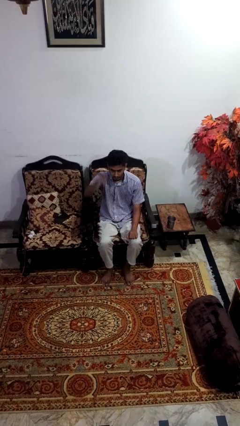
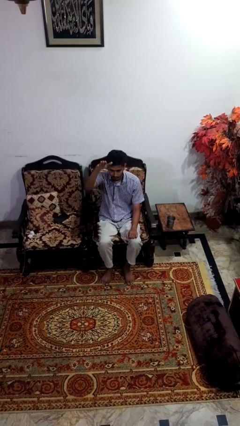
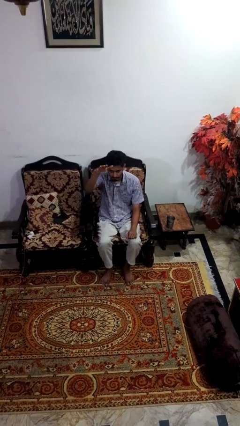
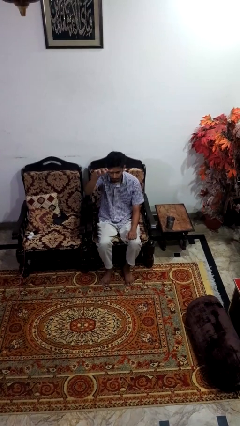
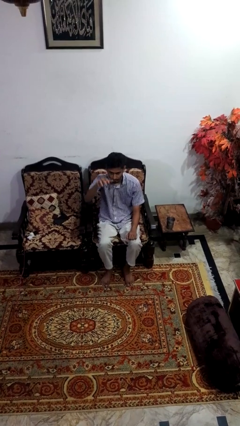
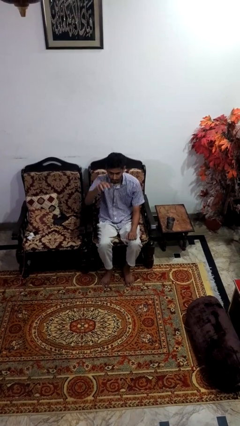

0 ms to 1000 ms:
person gestures swipe up

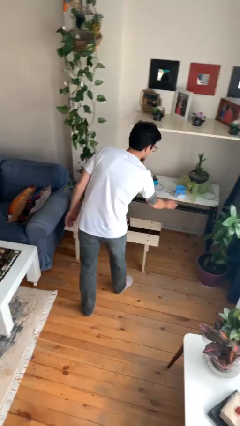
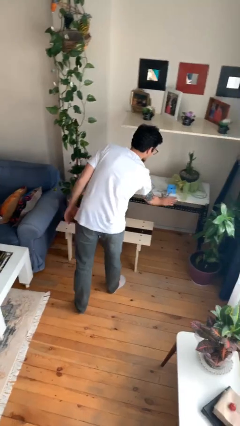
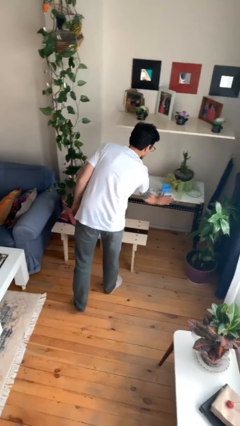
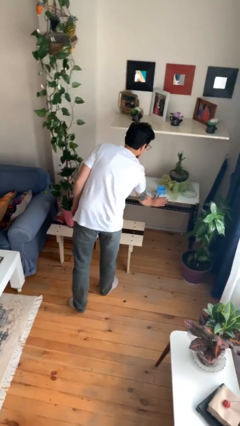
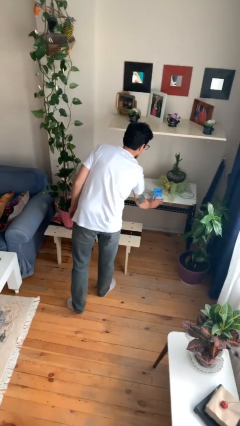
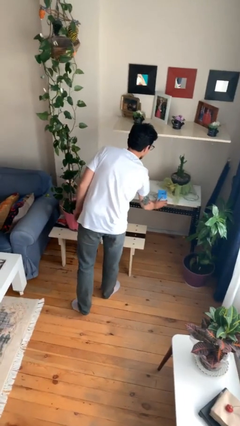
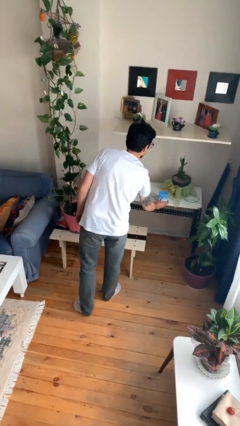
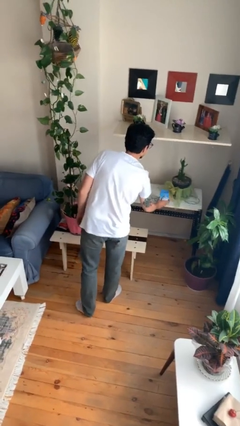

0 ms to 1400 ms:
person picks up object from table

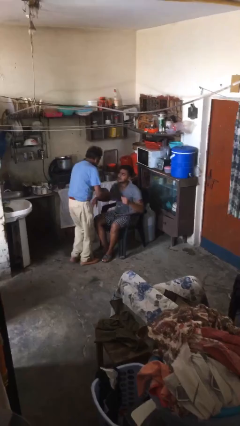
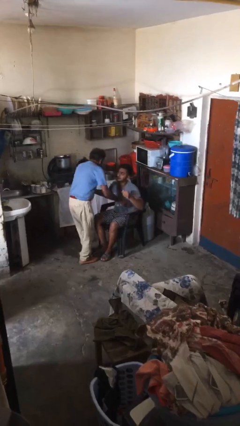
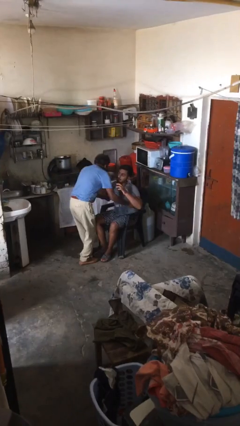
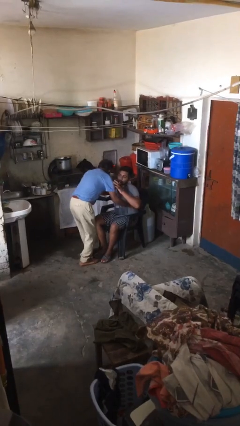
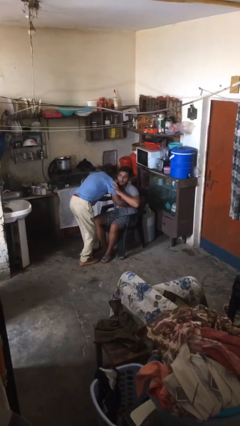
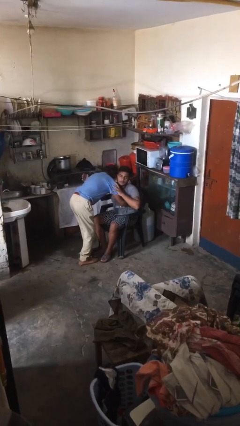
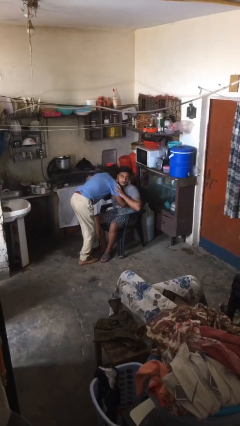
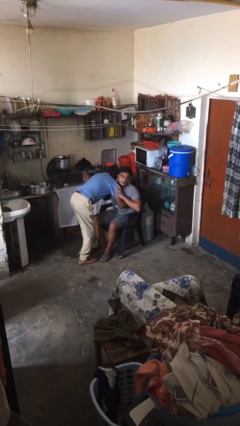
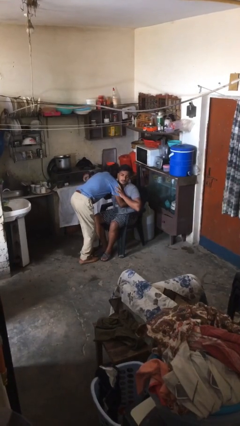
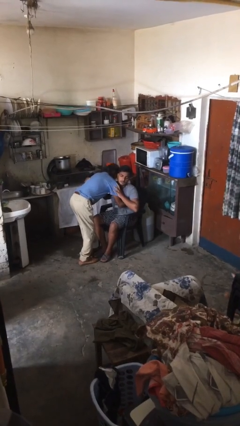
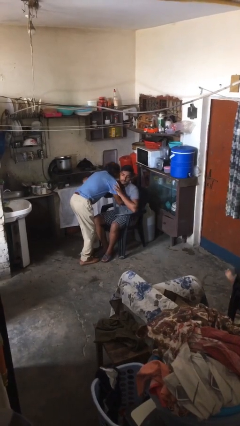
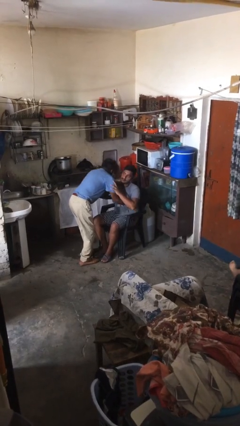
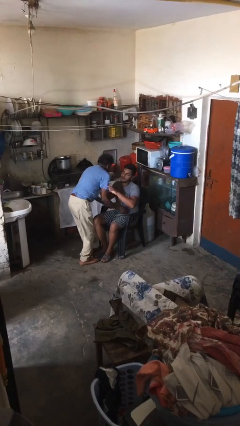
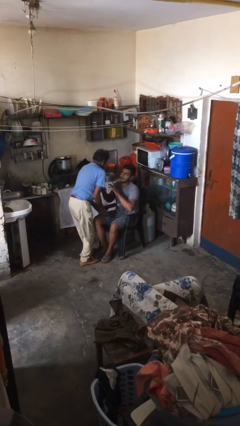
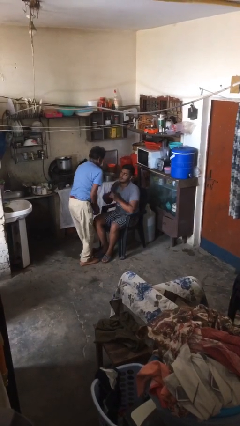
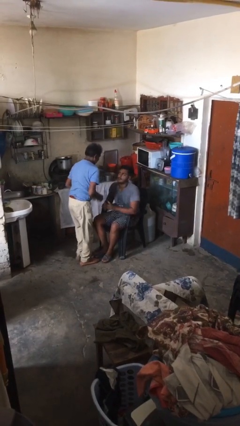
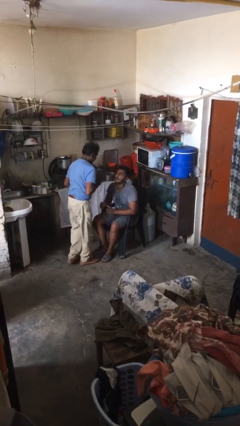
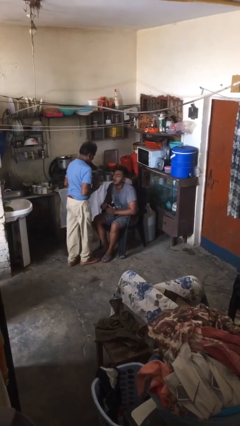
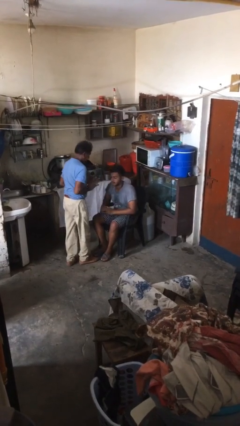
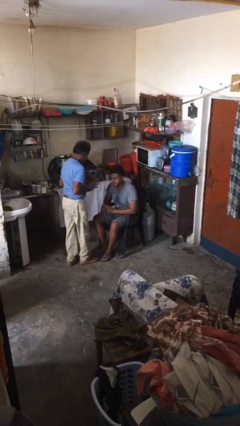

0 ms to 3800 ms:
person embraces person

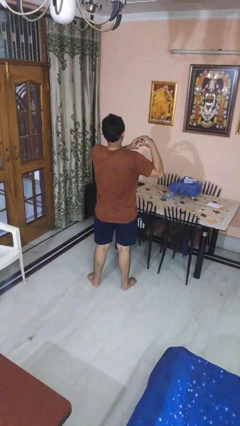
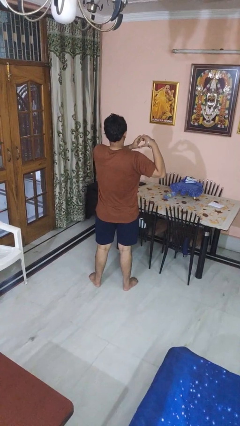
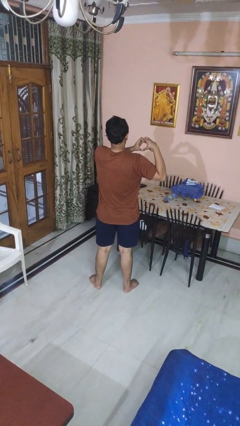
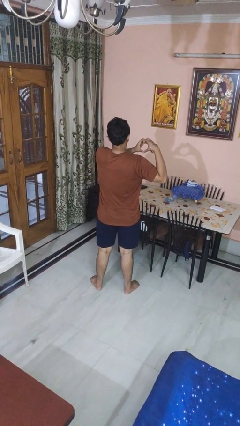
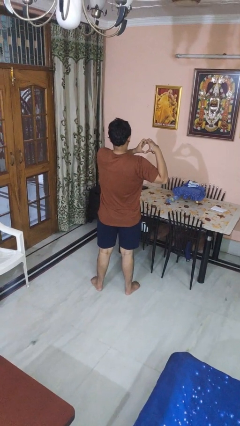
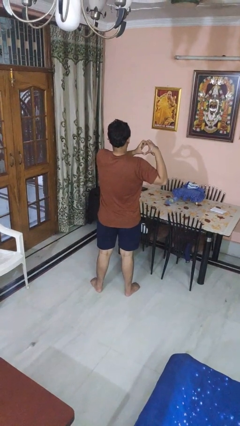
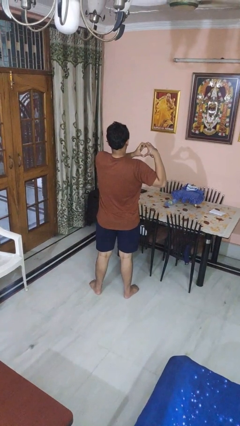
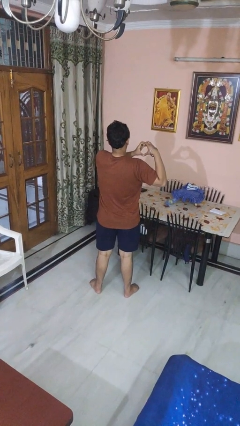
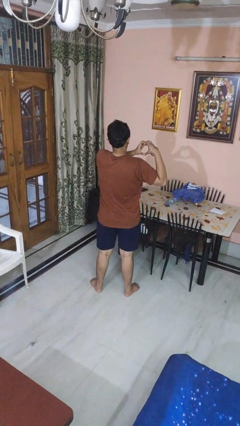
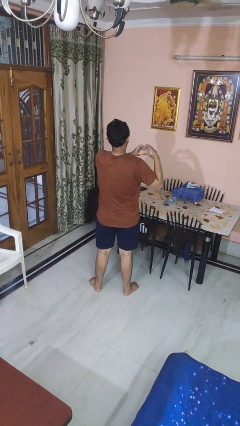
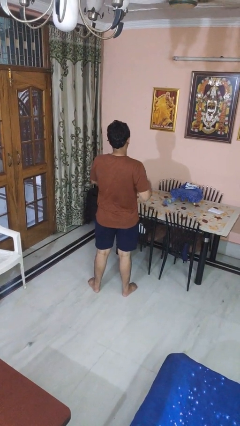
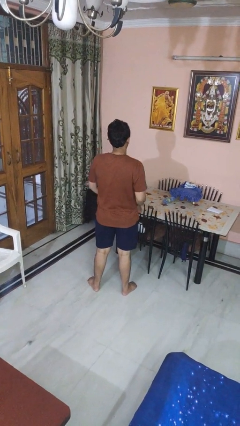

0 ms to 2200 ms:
person gestures heart

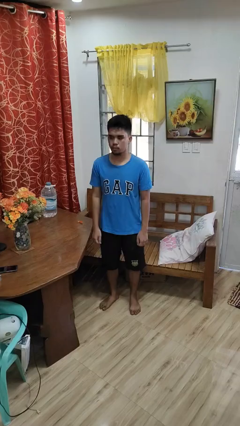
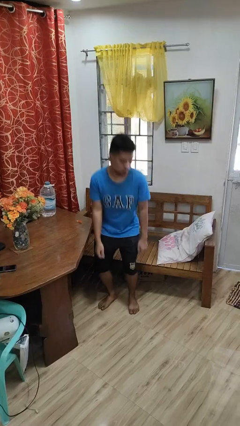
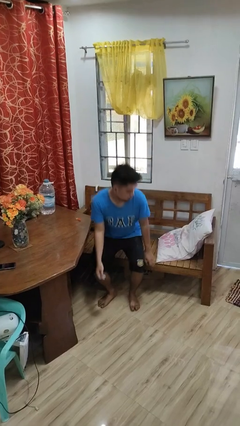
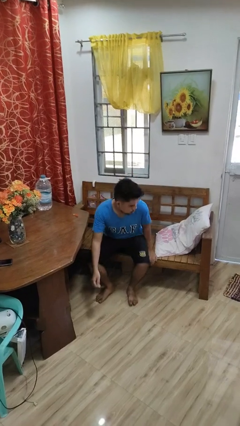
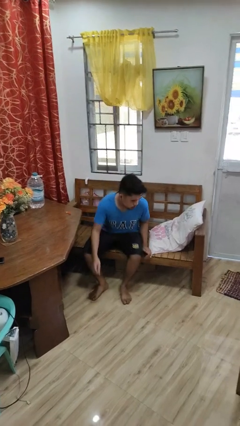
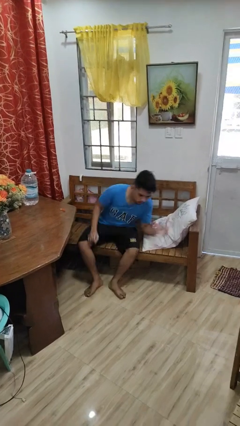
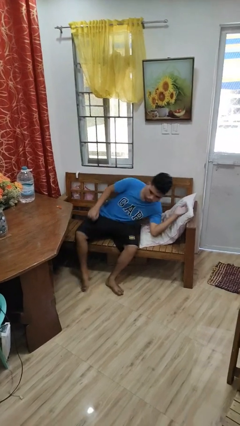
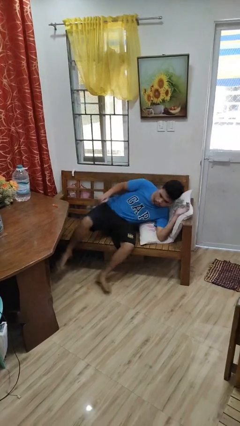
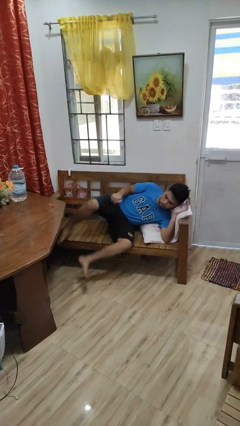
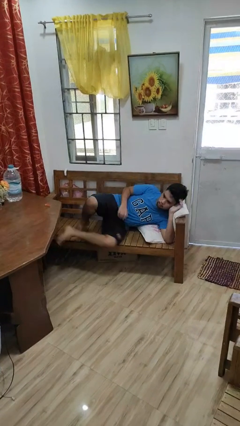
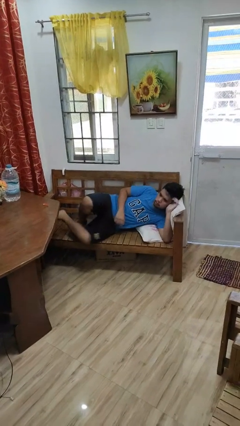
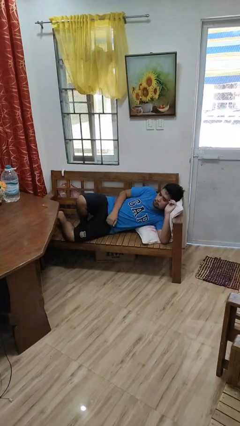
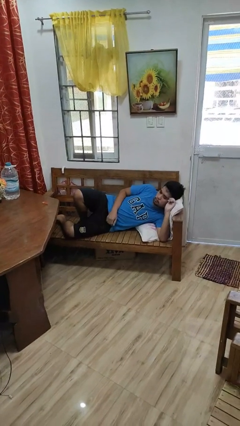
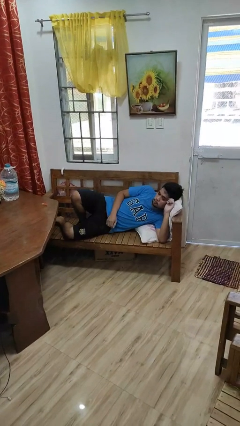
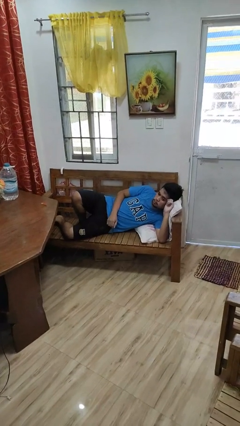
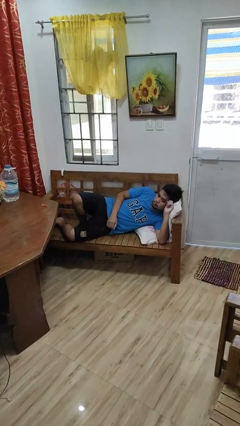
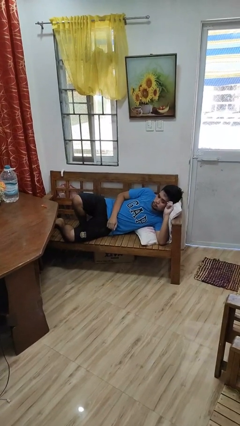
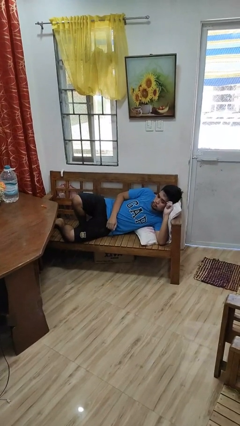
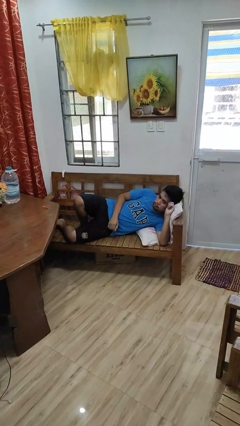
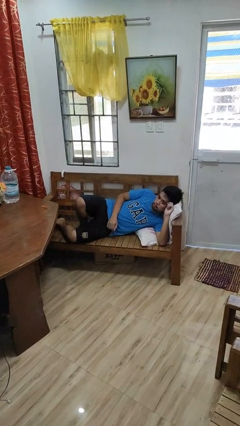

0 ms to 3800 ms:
person lies down on couch

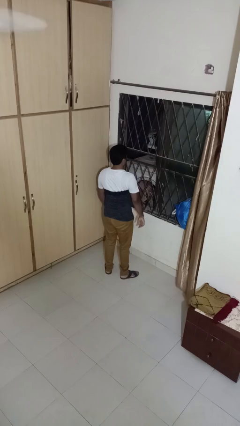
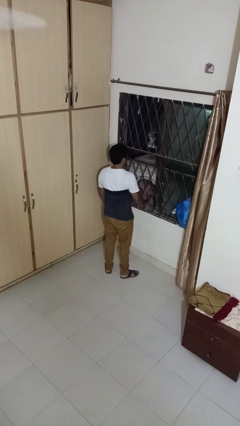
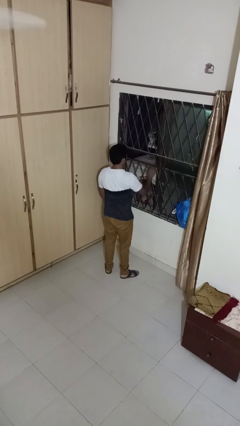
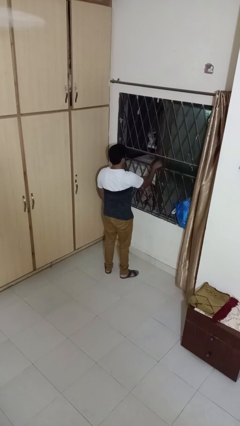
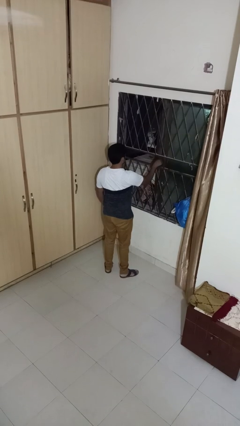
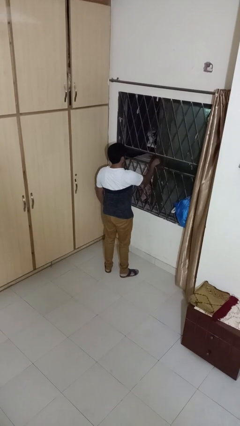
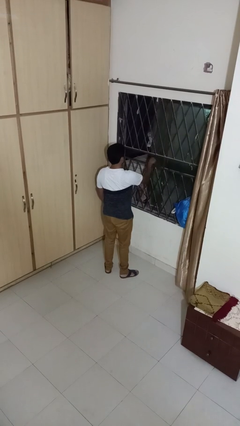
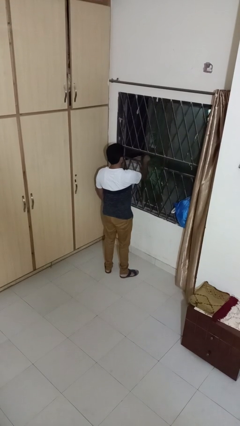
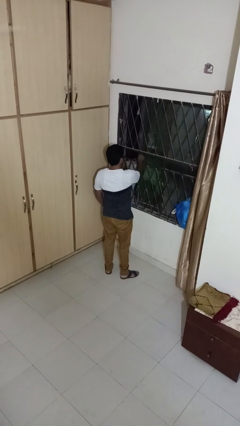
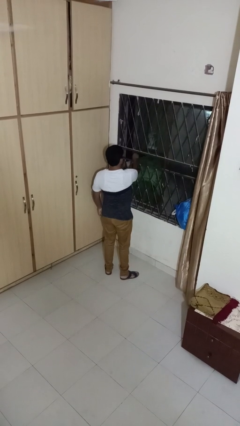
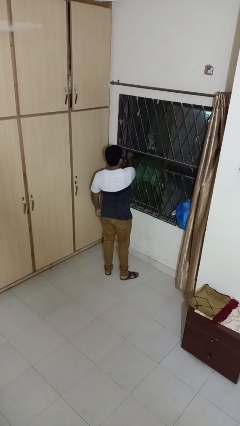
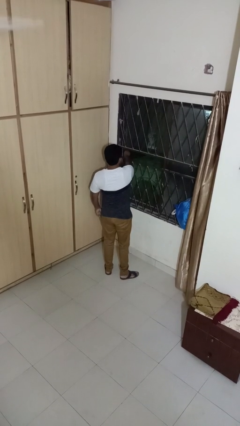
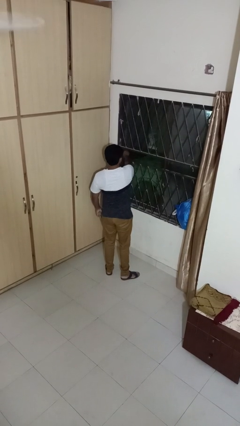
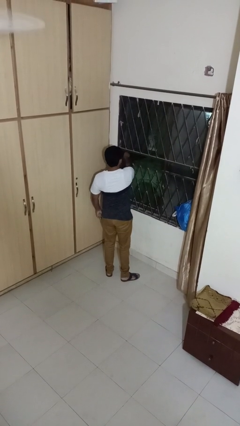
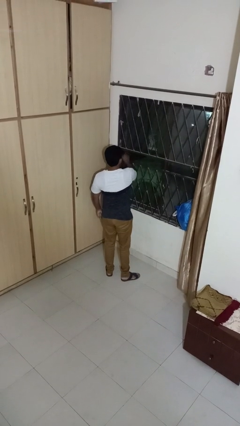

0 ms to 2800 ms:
person closes home window

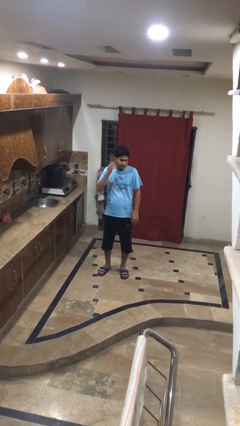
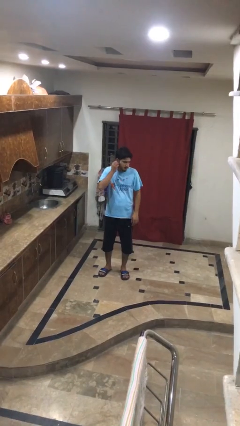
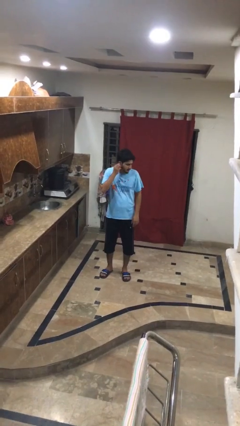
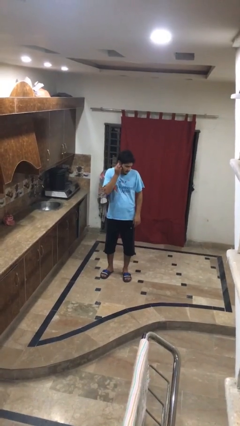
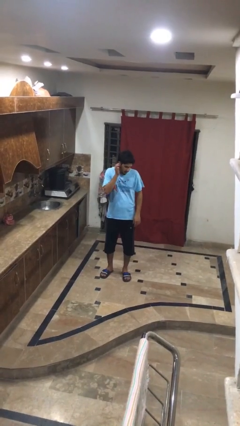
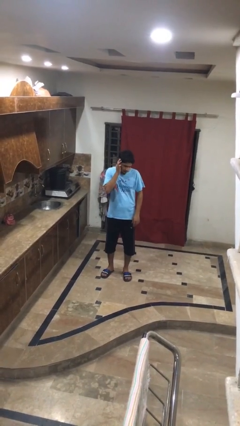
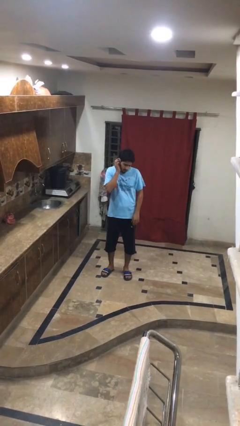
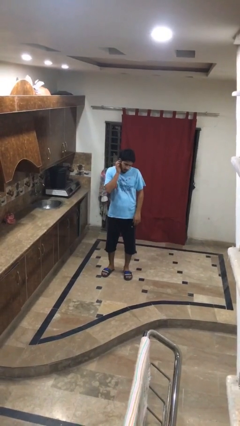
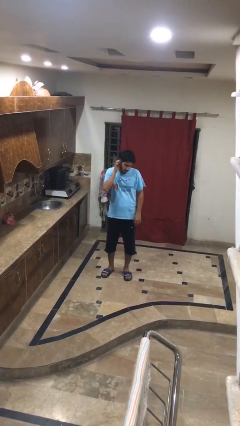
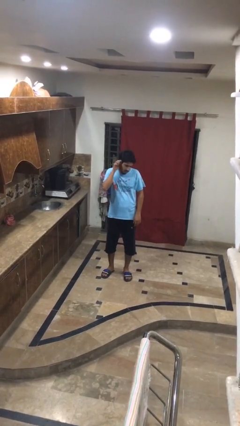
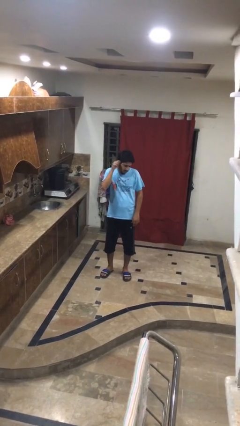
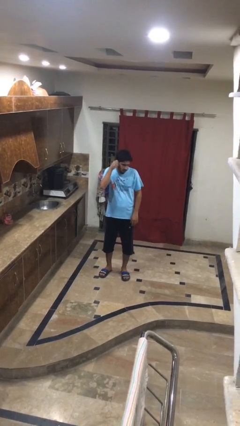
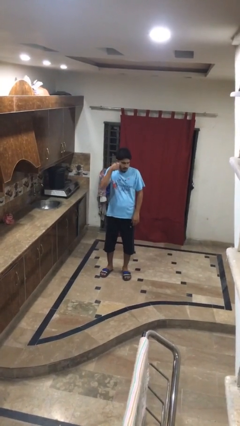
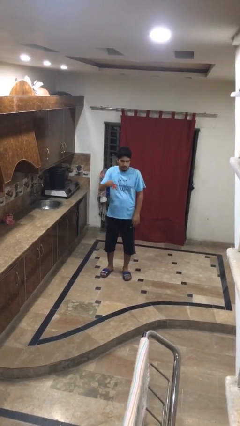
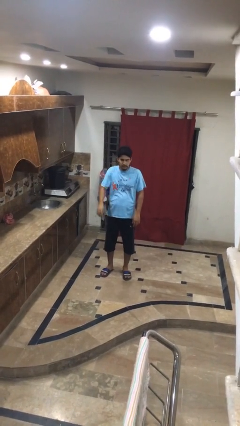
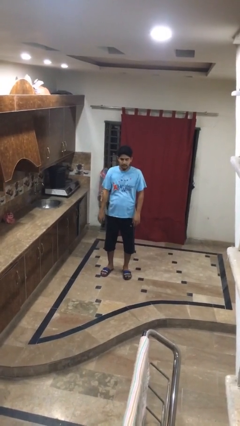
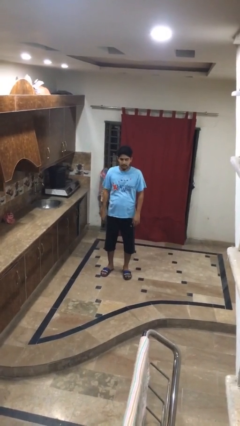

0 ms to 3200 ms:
person touches earlobe
